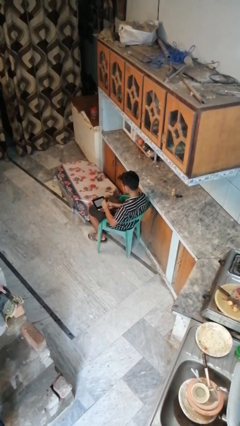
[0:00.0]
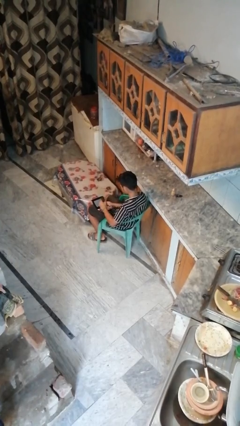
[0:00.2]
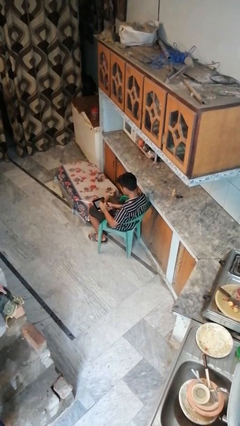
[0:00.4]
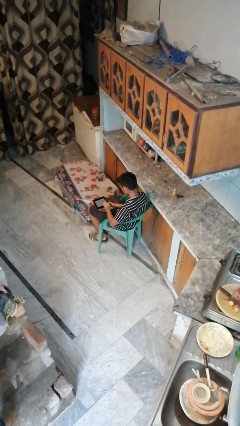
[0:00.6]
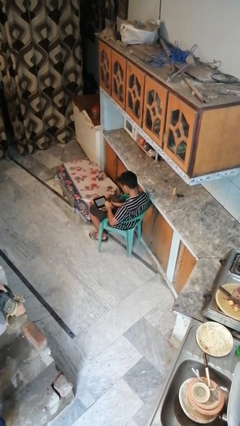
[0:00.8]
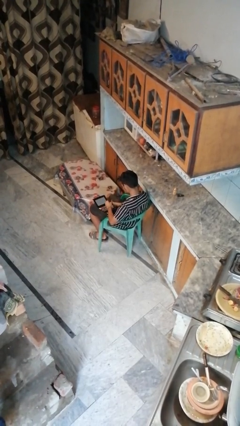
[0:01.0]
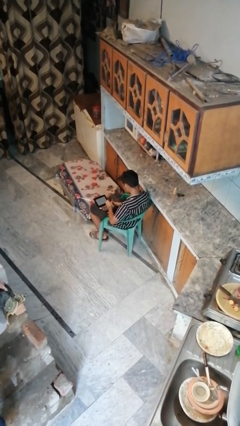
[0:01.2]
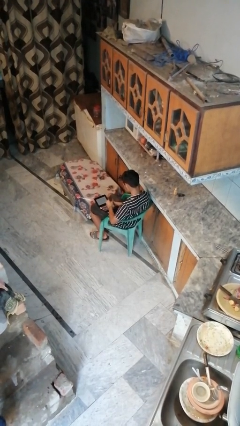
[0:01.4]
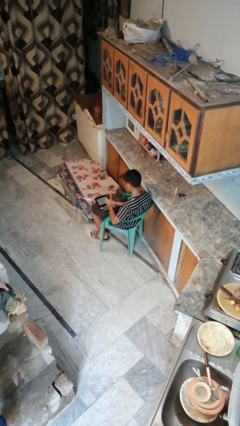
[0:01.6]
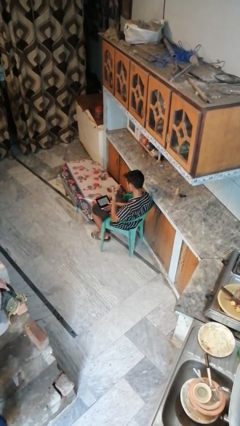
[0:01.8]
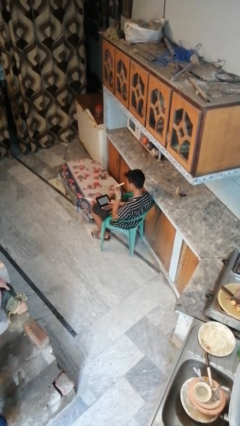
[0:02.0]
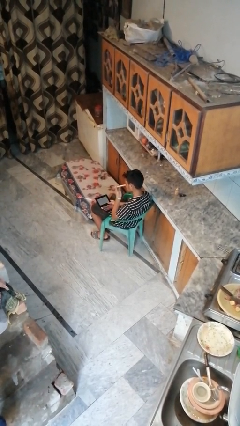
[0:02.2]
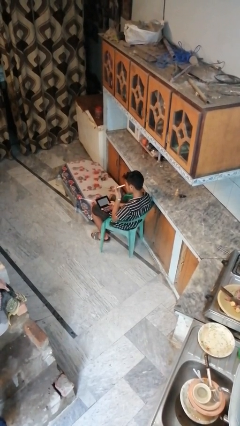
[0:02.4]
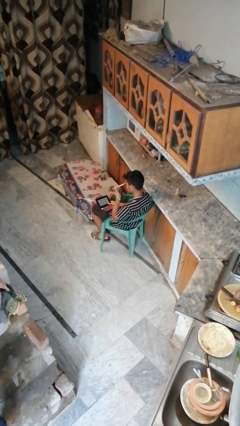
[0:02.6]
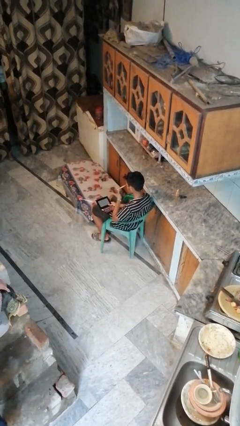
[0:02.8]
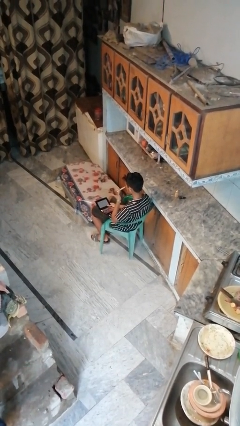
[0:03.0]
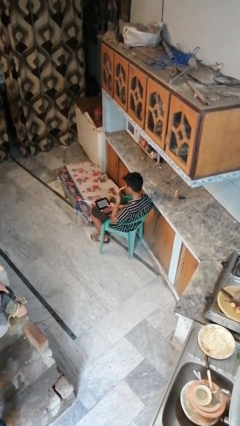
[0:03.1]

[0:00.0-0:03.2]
person applies eye makeup

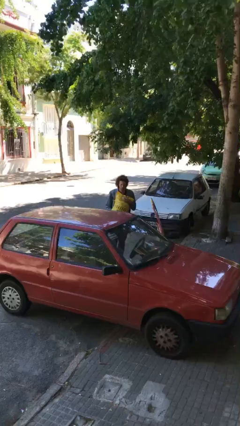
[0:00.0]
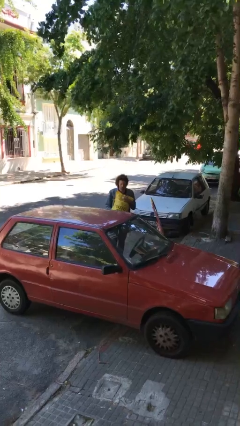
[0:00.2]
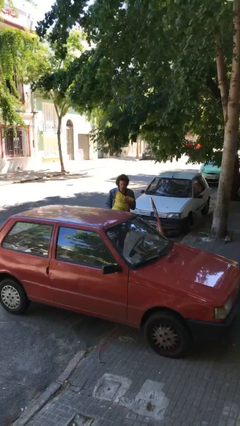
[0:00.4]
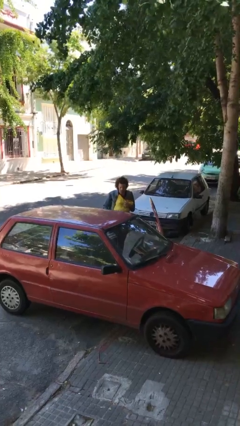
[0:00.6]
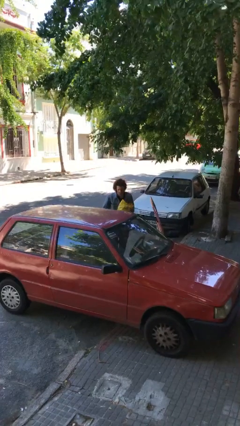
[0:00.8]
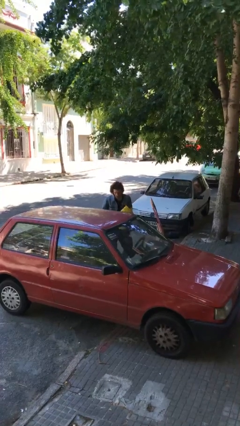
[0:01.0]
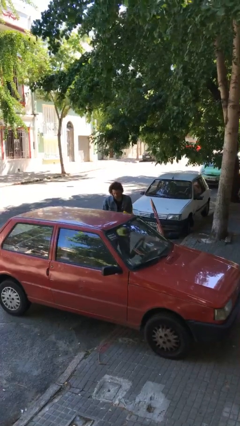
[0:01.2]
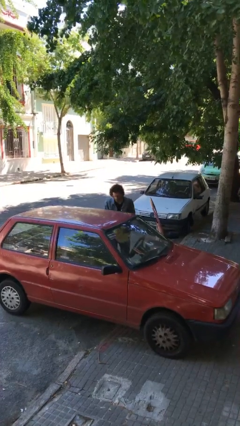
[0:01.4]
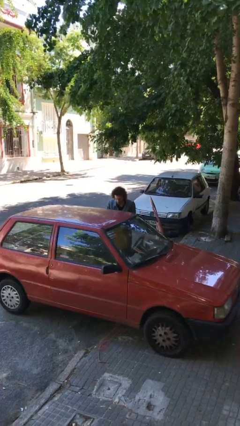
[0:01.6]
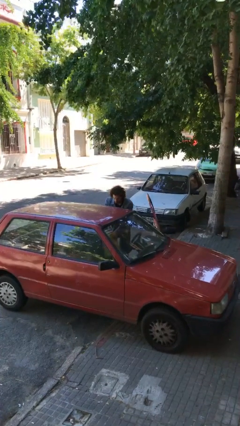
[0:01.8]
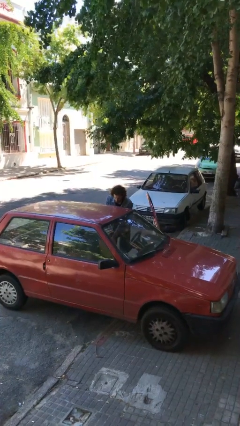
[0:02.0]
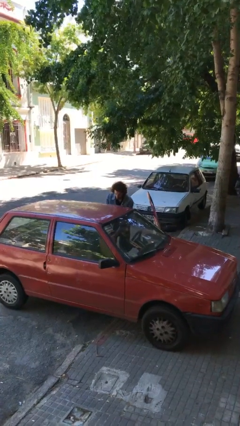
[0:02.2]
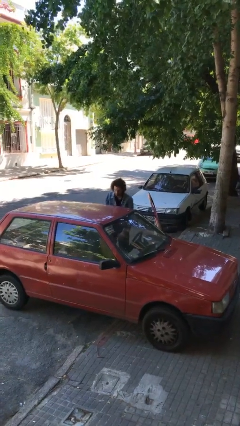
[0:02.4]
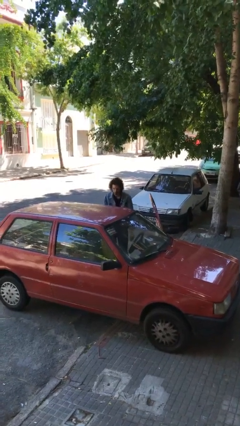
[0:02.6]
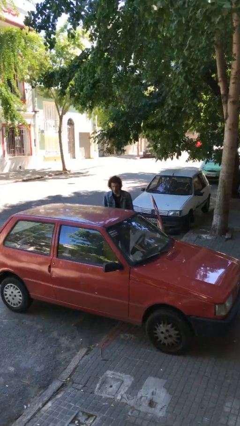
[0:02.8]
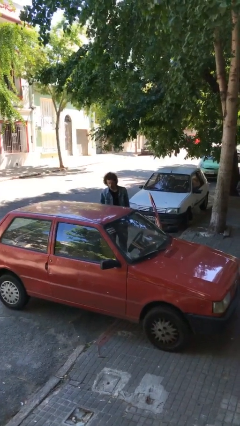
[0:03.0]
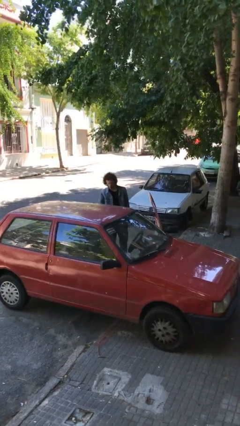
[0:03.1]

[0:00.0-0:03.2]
person loads car

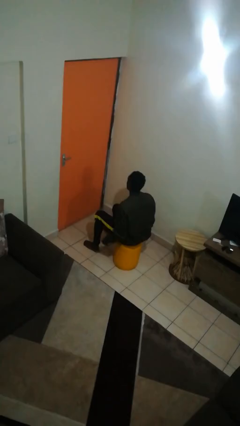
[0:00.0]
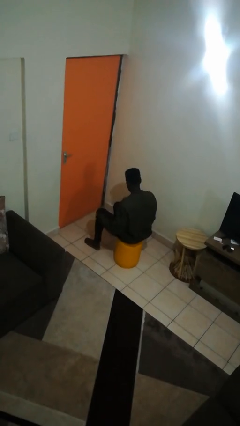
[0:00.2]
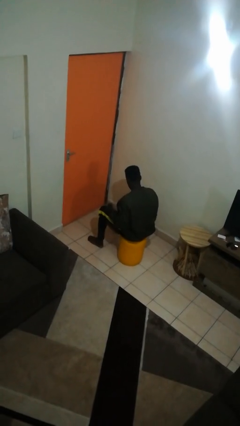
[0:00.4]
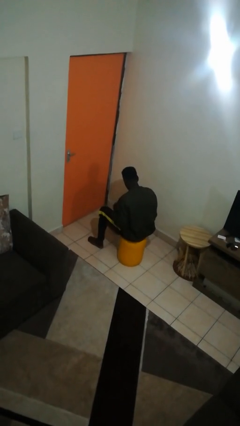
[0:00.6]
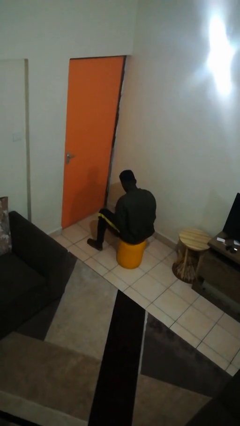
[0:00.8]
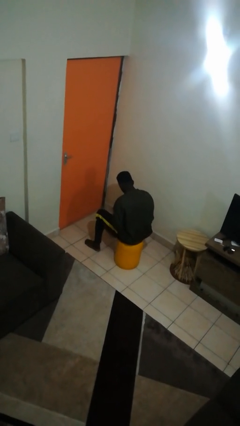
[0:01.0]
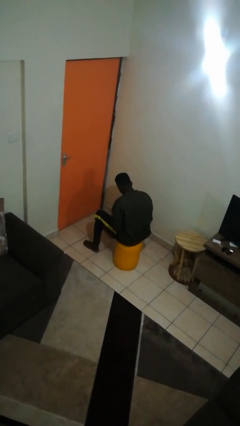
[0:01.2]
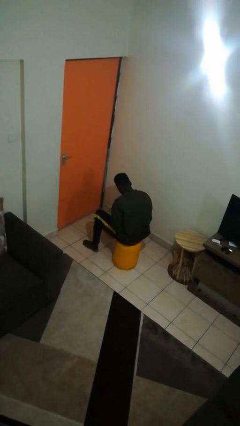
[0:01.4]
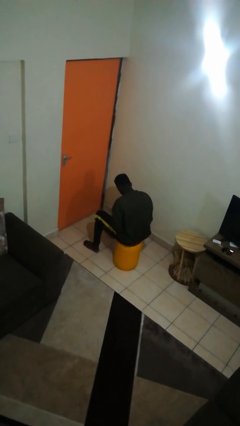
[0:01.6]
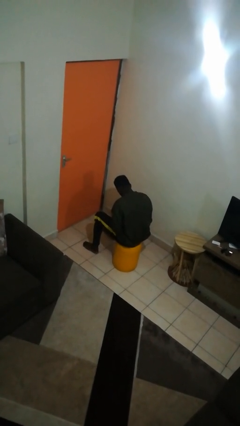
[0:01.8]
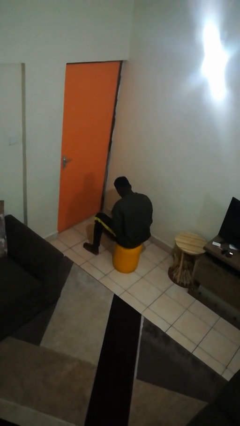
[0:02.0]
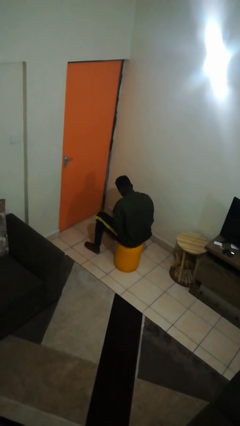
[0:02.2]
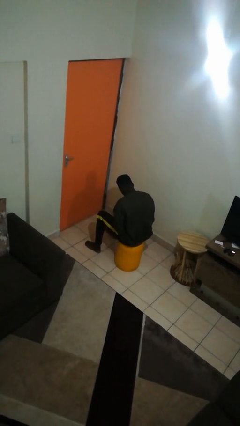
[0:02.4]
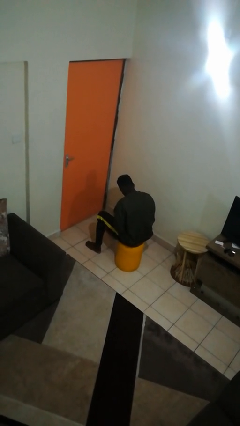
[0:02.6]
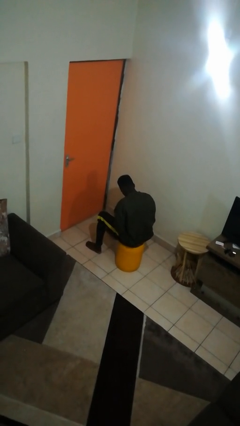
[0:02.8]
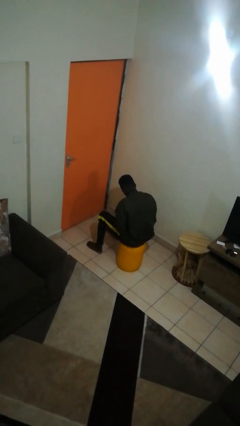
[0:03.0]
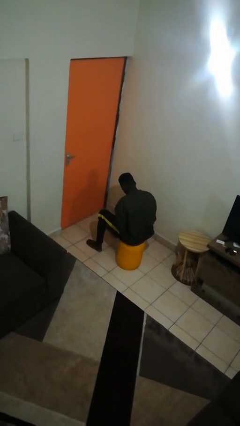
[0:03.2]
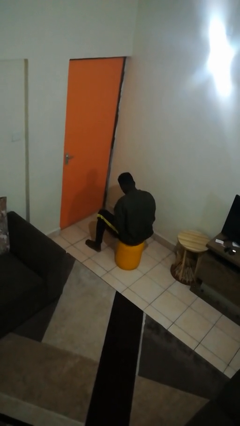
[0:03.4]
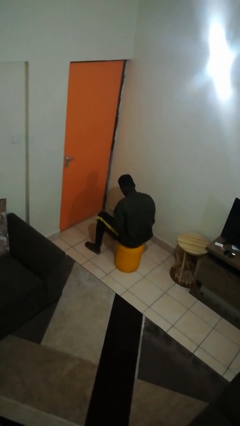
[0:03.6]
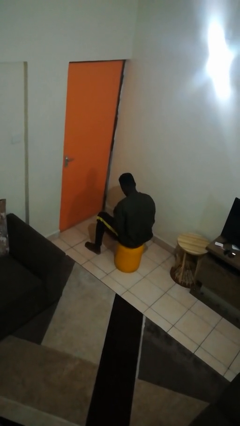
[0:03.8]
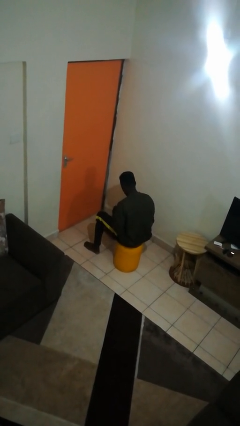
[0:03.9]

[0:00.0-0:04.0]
person looks at hands in lap

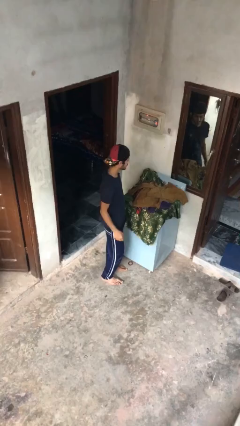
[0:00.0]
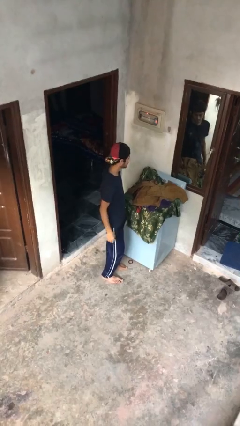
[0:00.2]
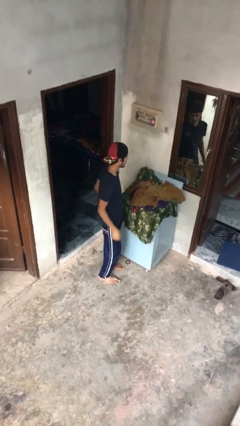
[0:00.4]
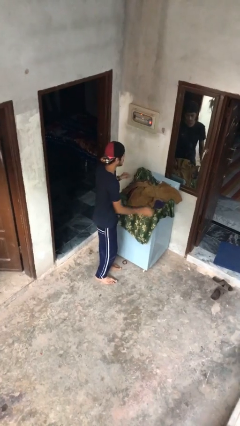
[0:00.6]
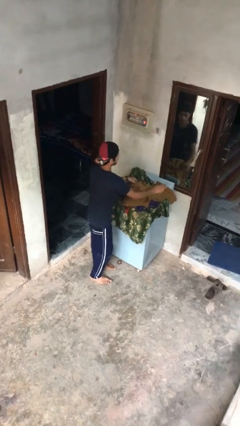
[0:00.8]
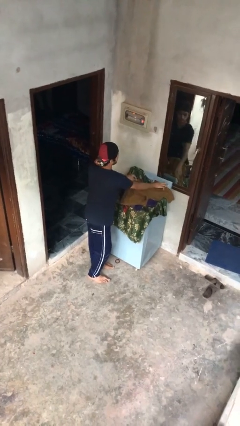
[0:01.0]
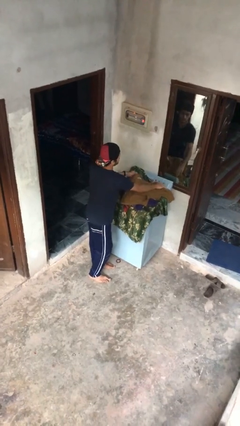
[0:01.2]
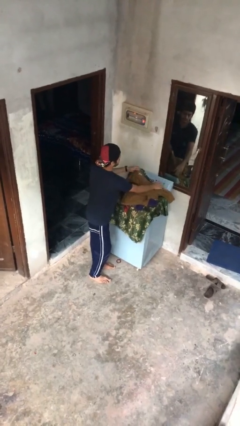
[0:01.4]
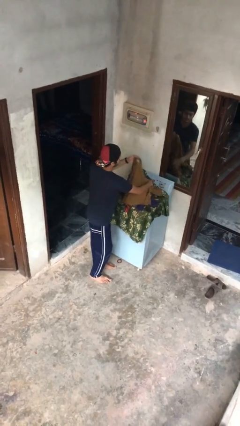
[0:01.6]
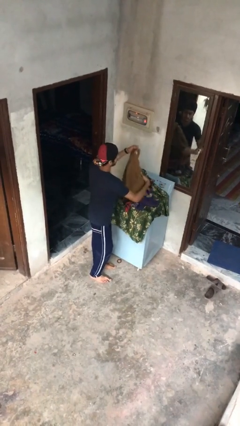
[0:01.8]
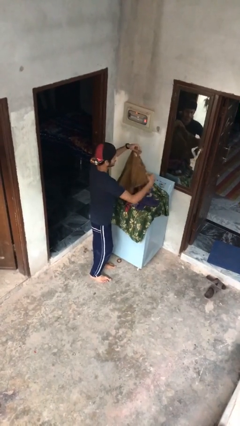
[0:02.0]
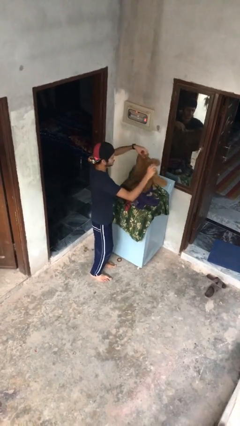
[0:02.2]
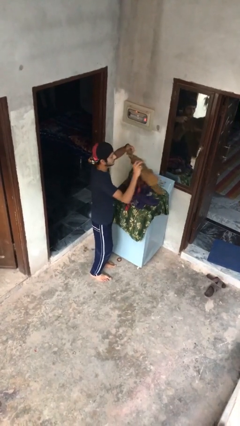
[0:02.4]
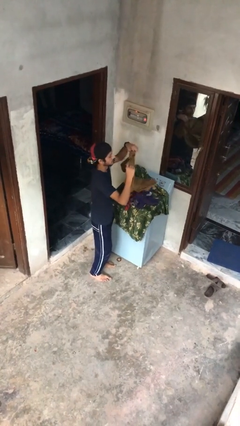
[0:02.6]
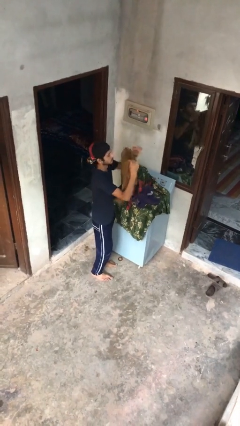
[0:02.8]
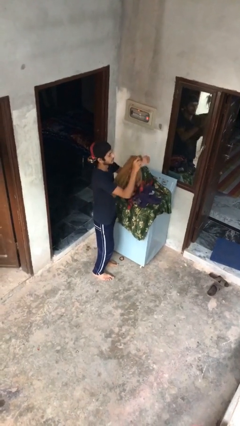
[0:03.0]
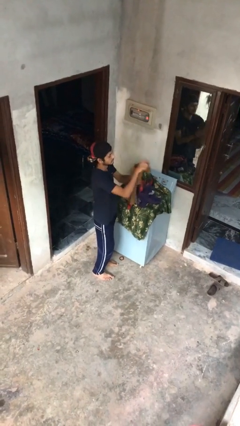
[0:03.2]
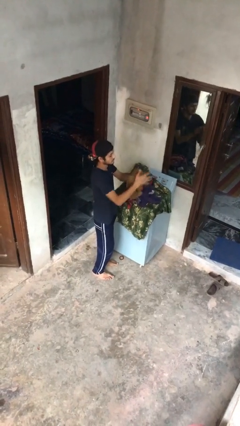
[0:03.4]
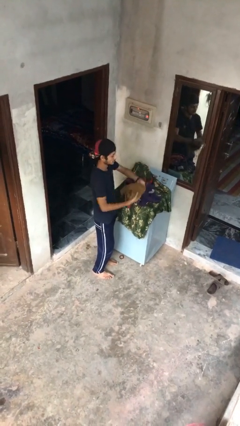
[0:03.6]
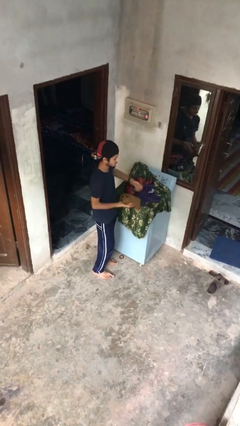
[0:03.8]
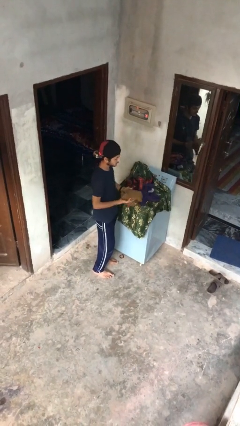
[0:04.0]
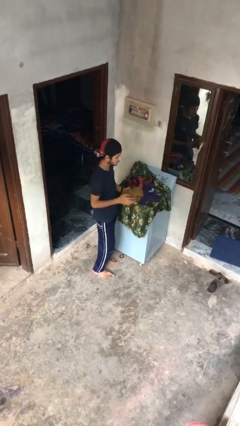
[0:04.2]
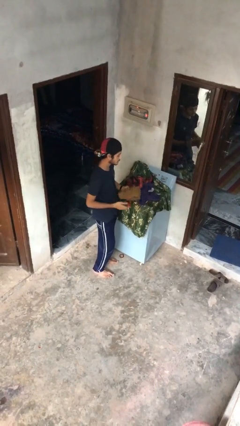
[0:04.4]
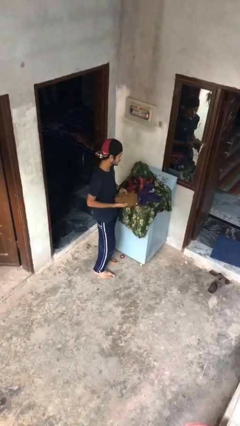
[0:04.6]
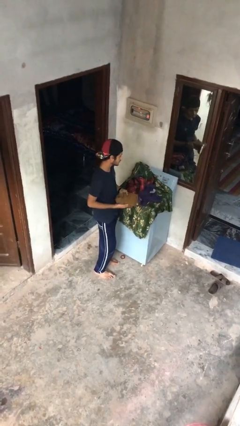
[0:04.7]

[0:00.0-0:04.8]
person folds shirt

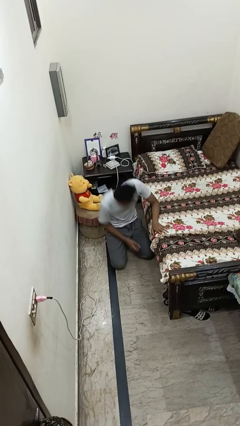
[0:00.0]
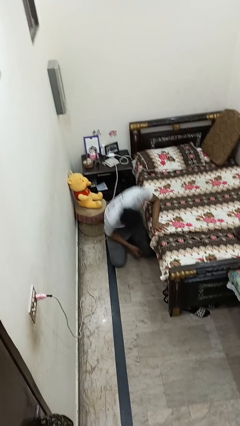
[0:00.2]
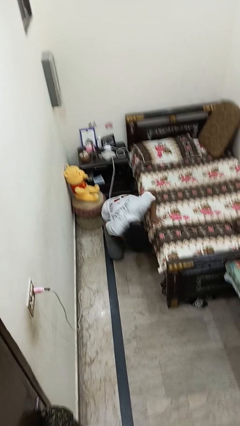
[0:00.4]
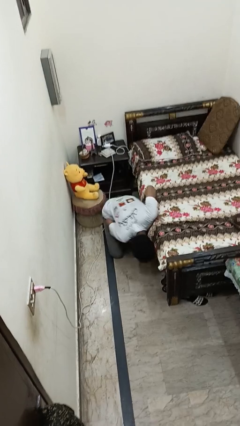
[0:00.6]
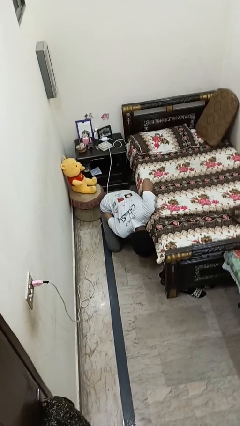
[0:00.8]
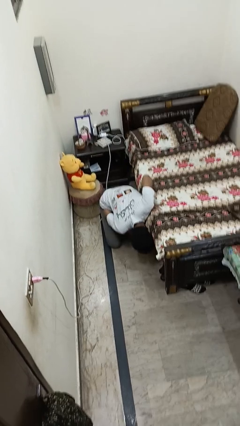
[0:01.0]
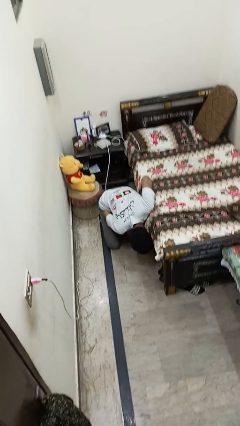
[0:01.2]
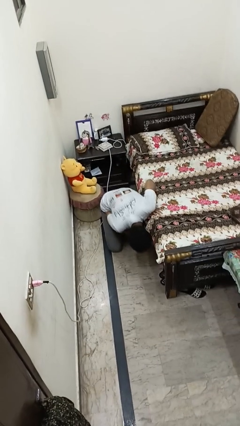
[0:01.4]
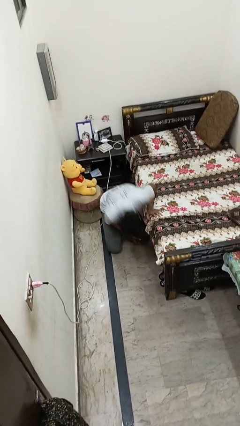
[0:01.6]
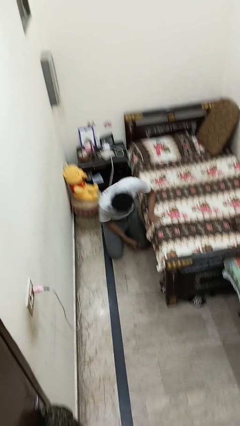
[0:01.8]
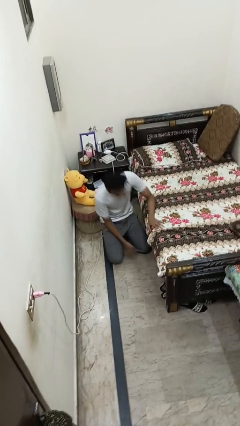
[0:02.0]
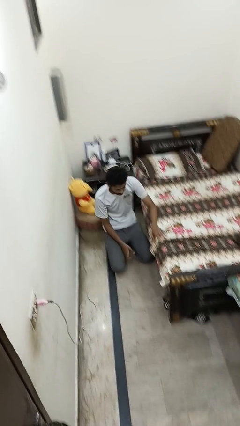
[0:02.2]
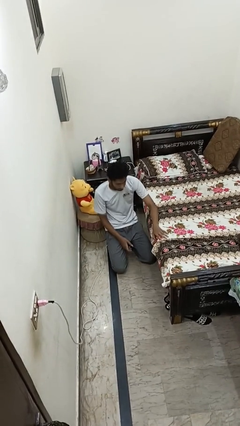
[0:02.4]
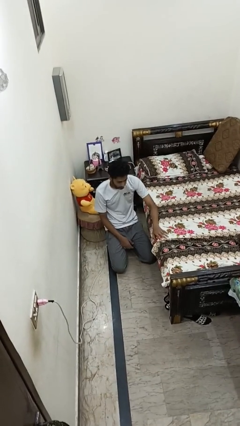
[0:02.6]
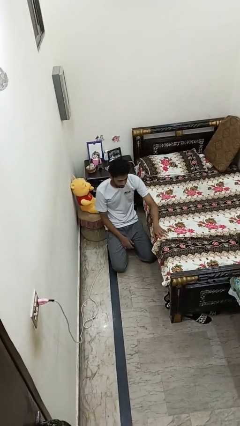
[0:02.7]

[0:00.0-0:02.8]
person searches under bed
